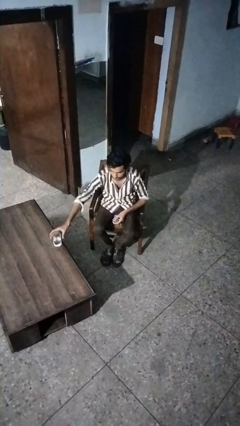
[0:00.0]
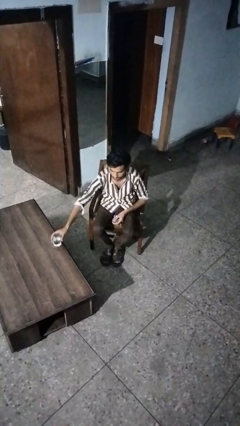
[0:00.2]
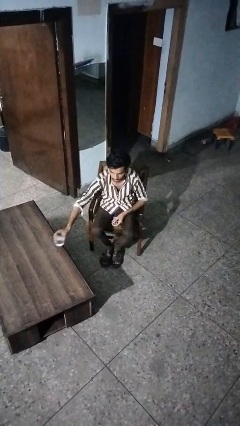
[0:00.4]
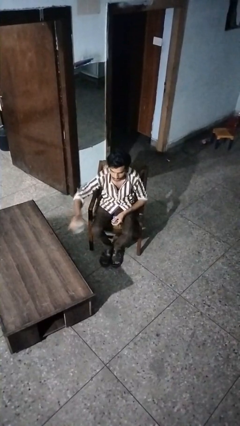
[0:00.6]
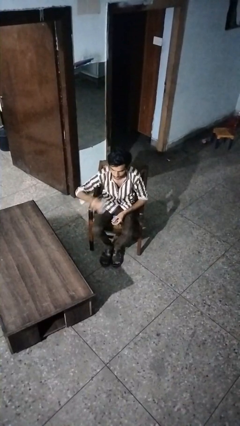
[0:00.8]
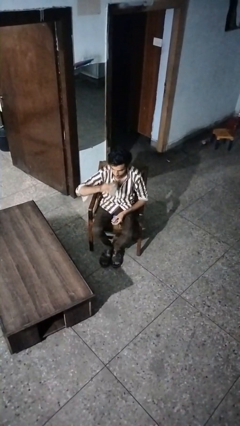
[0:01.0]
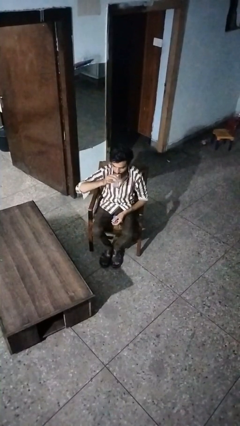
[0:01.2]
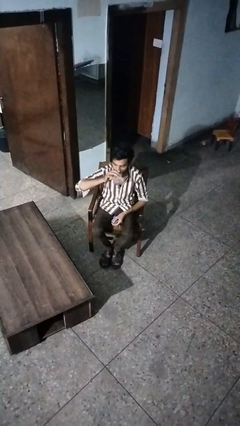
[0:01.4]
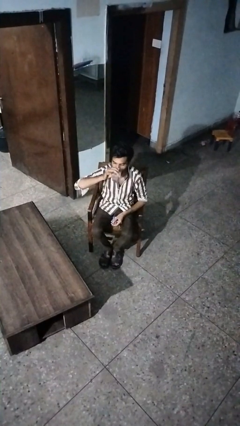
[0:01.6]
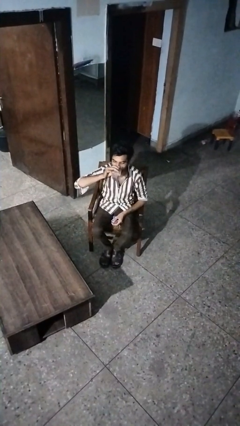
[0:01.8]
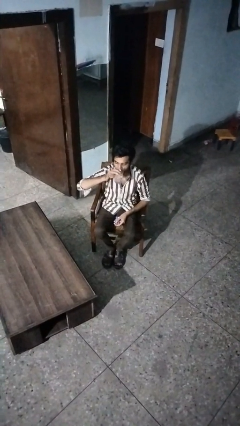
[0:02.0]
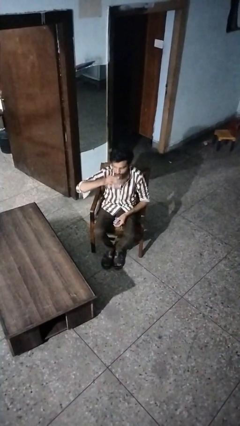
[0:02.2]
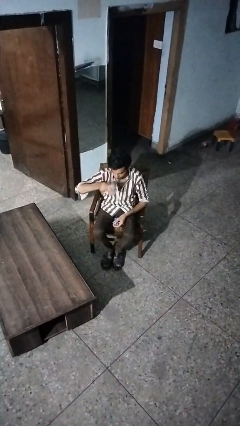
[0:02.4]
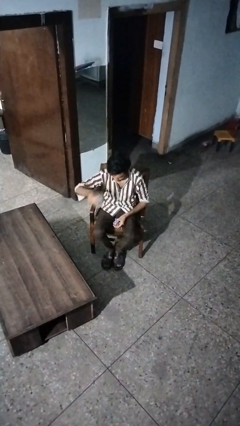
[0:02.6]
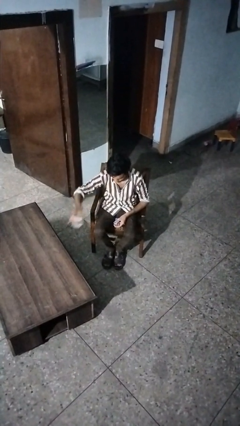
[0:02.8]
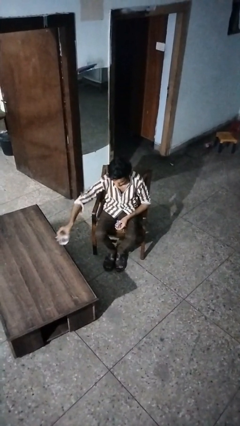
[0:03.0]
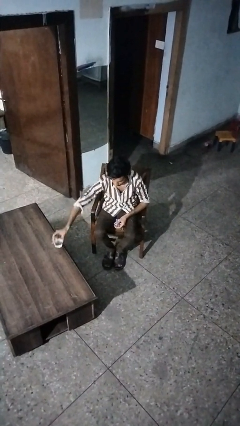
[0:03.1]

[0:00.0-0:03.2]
person drinks from cup

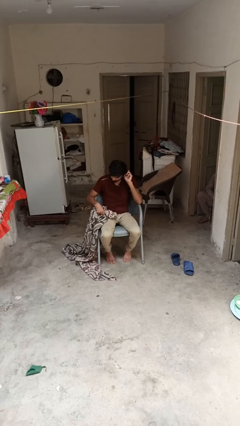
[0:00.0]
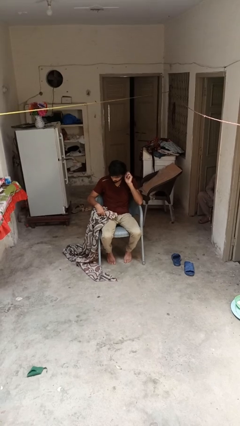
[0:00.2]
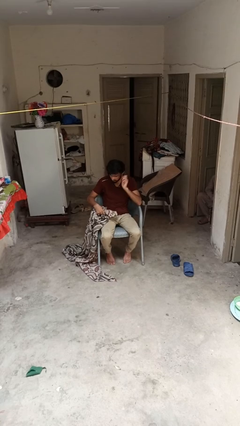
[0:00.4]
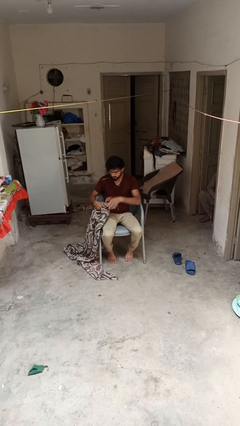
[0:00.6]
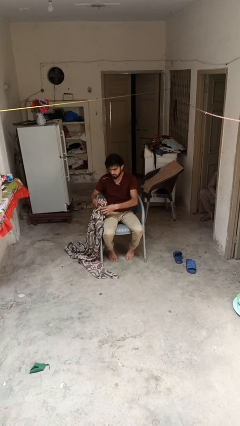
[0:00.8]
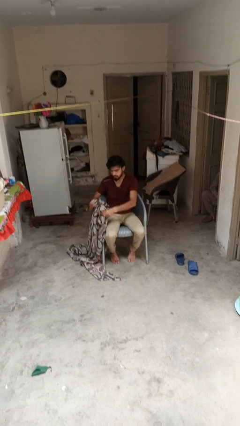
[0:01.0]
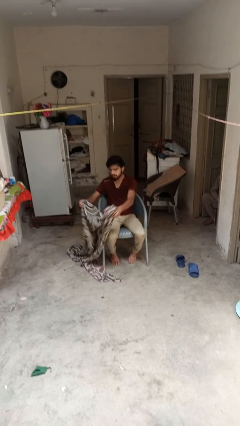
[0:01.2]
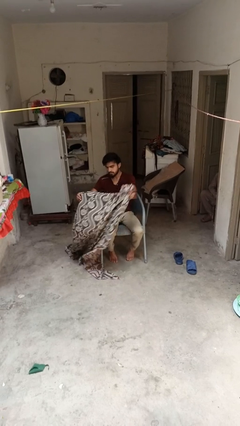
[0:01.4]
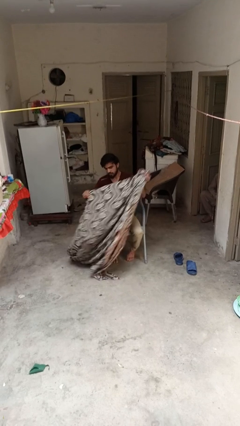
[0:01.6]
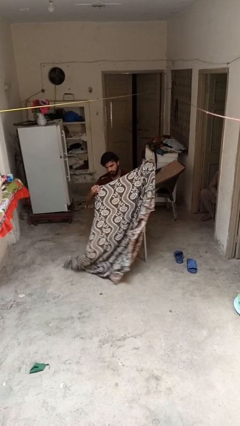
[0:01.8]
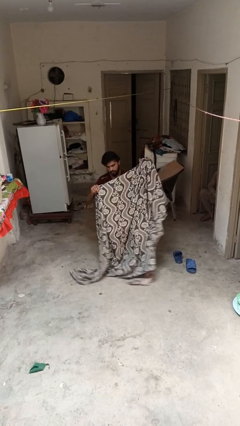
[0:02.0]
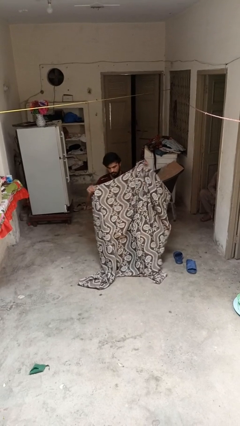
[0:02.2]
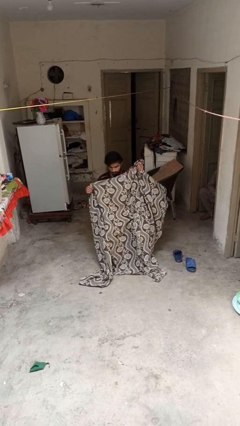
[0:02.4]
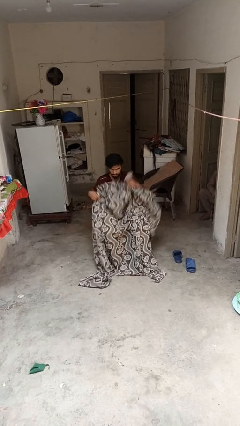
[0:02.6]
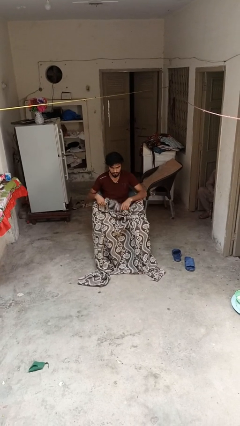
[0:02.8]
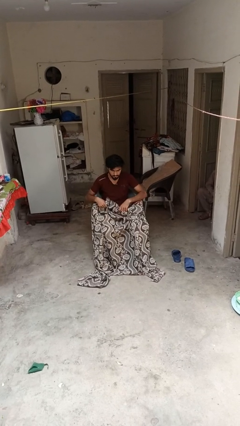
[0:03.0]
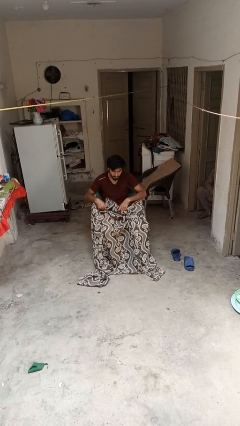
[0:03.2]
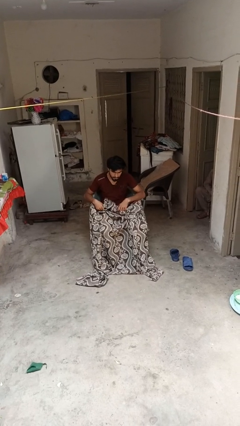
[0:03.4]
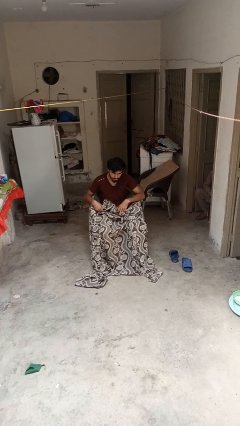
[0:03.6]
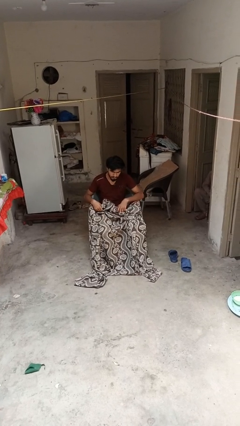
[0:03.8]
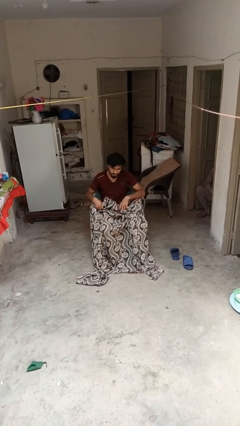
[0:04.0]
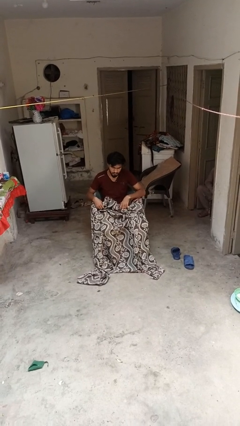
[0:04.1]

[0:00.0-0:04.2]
person covers with blanket

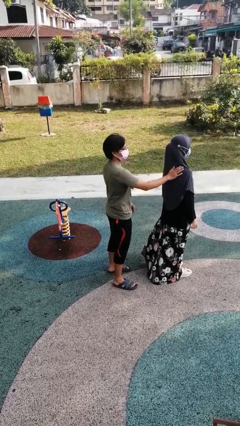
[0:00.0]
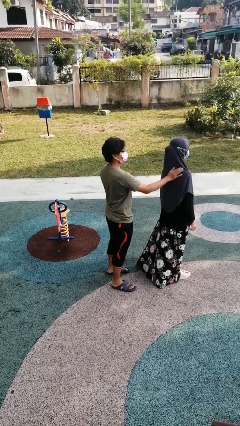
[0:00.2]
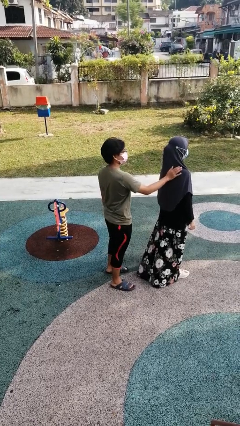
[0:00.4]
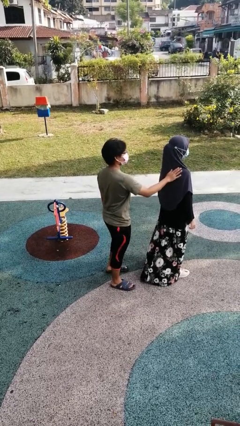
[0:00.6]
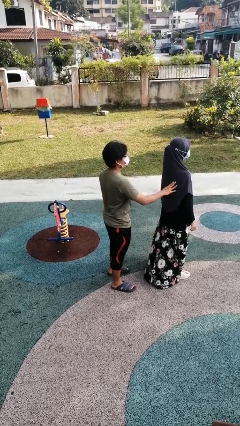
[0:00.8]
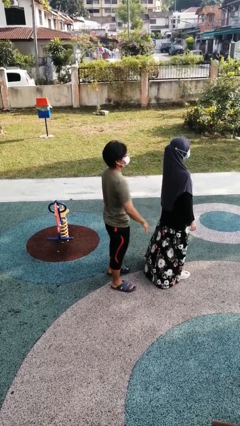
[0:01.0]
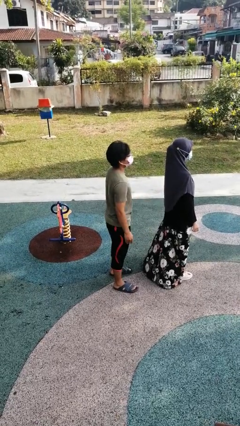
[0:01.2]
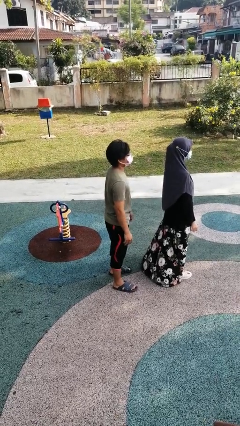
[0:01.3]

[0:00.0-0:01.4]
person touches back of person

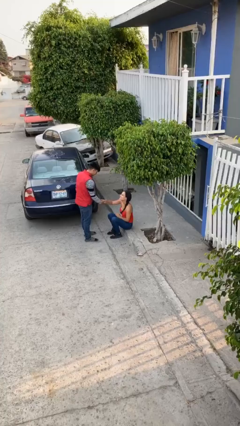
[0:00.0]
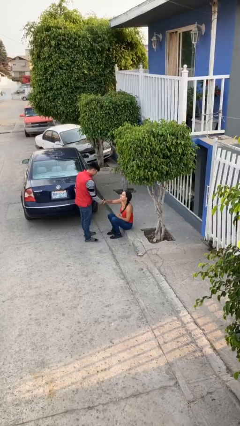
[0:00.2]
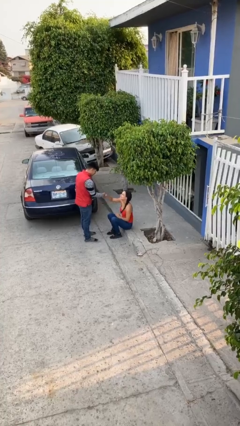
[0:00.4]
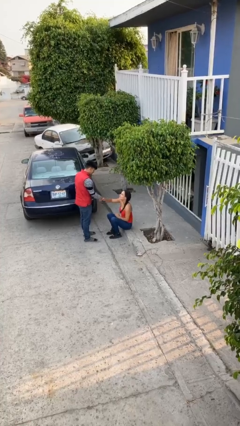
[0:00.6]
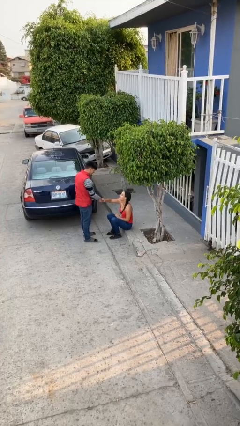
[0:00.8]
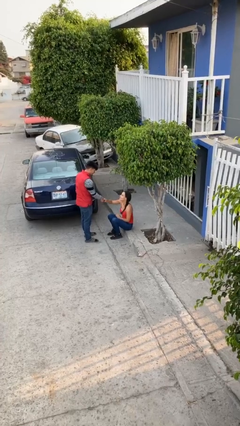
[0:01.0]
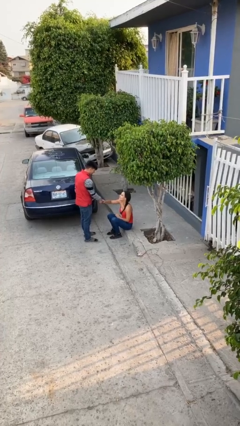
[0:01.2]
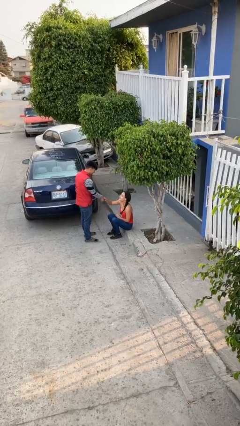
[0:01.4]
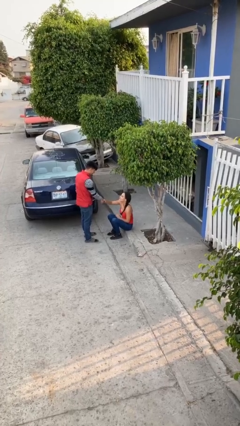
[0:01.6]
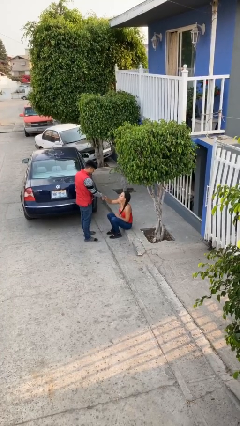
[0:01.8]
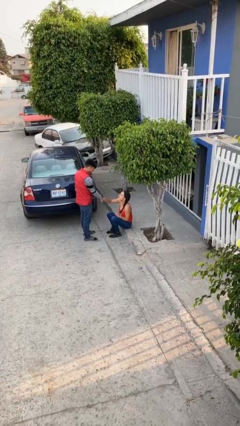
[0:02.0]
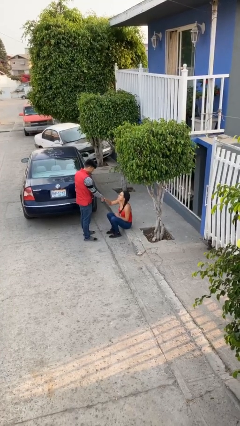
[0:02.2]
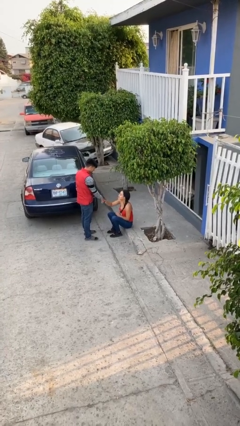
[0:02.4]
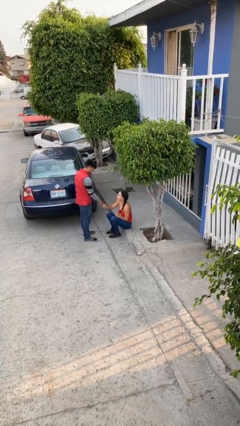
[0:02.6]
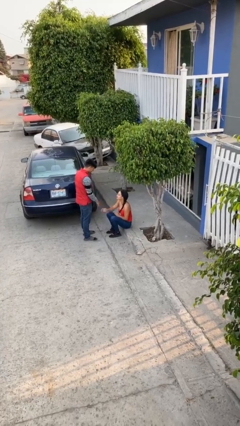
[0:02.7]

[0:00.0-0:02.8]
person shakes hand

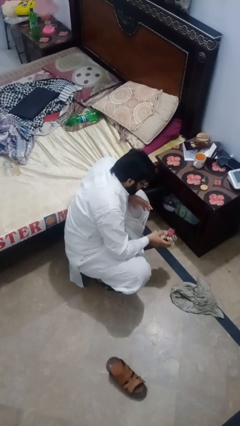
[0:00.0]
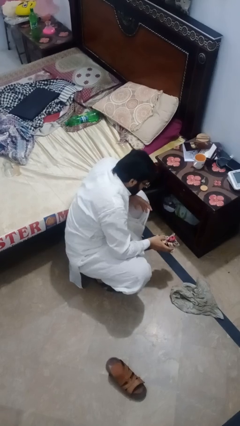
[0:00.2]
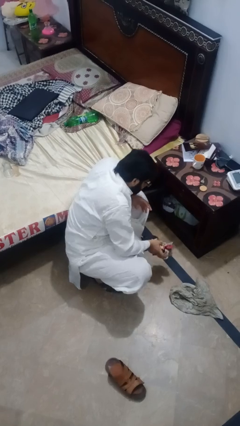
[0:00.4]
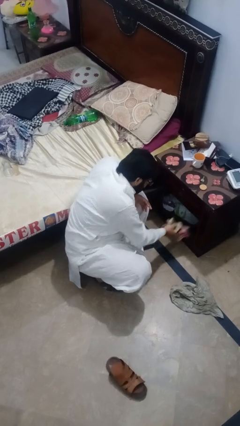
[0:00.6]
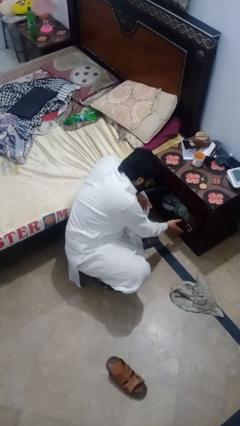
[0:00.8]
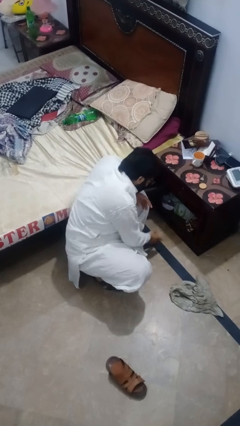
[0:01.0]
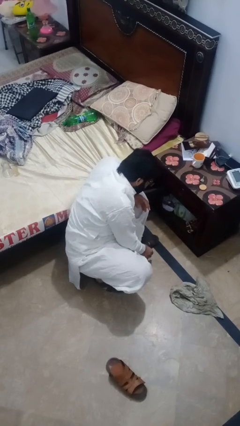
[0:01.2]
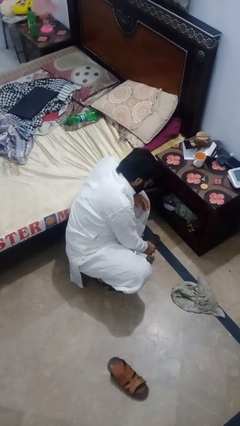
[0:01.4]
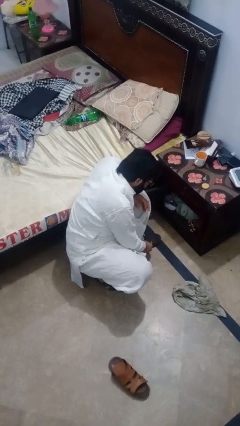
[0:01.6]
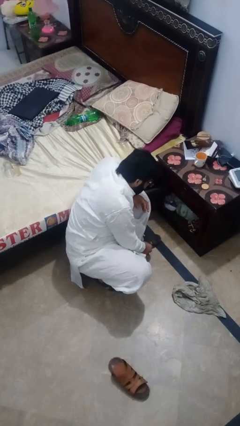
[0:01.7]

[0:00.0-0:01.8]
person puts down object into cabinet

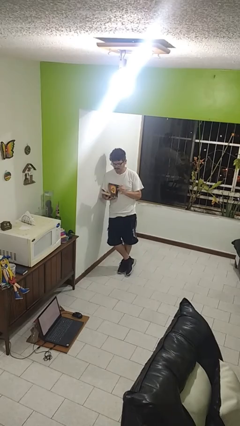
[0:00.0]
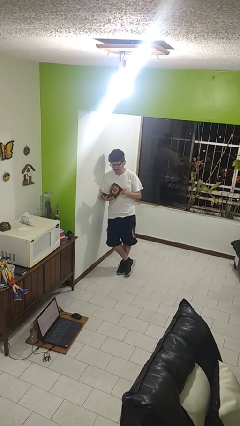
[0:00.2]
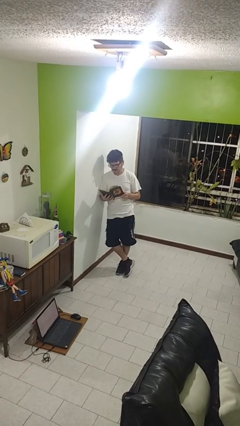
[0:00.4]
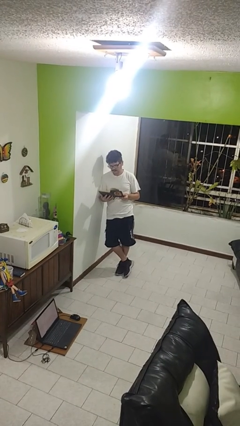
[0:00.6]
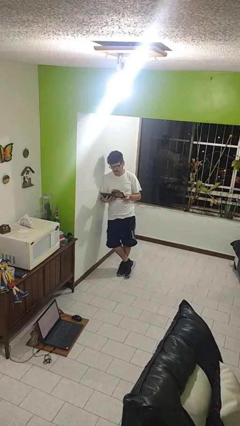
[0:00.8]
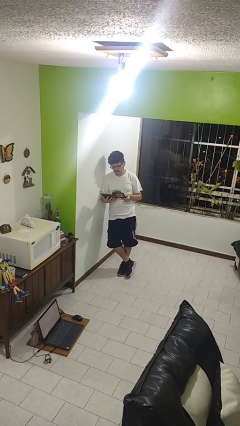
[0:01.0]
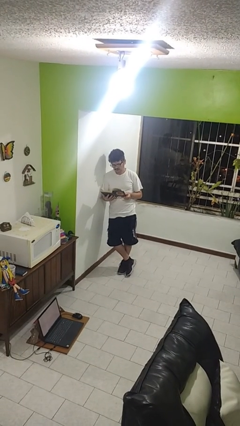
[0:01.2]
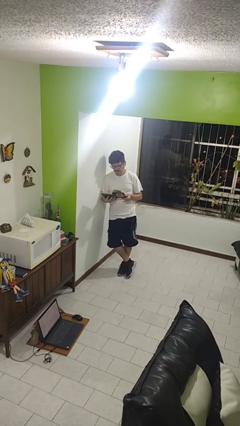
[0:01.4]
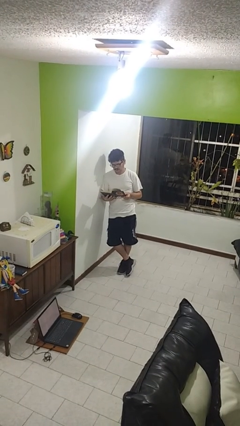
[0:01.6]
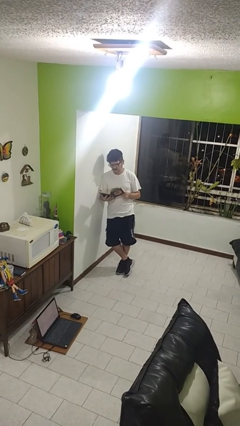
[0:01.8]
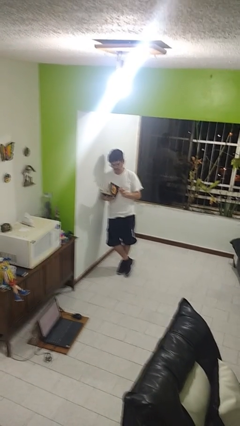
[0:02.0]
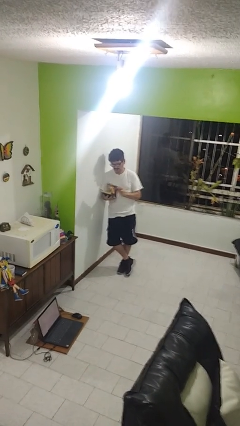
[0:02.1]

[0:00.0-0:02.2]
person reads book

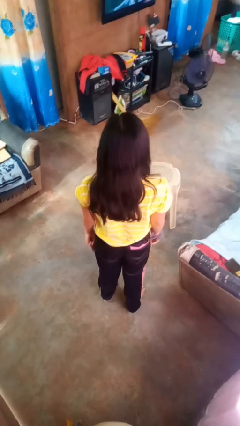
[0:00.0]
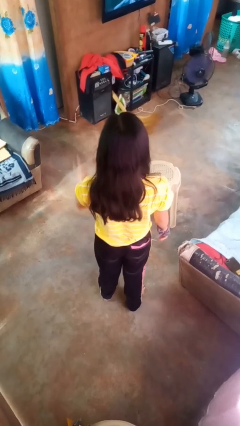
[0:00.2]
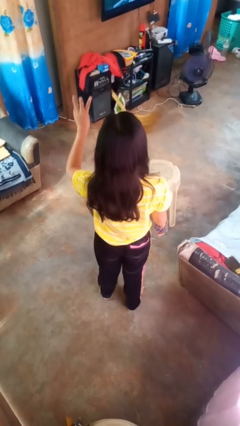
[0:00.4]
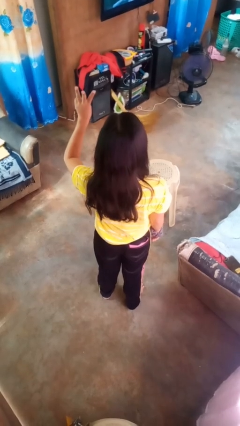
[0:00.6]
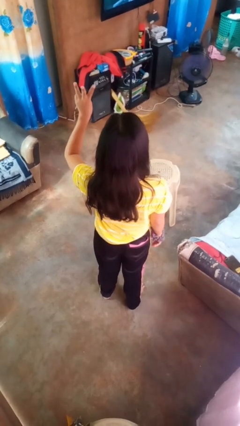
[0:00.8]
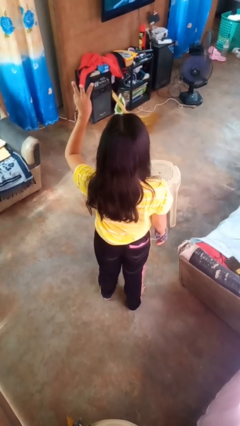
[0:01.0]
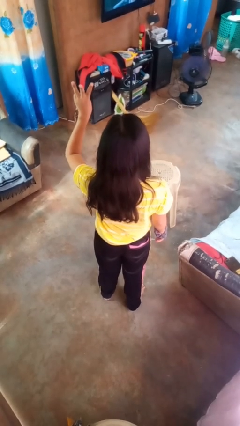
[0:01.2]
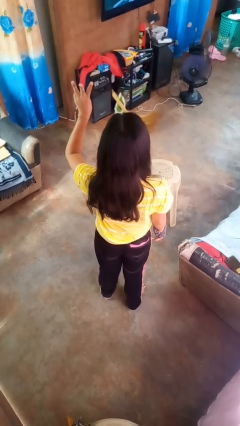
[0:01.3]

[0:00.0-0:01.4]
person gestures number three
